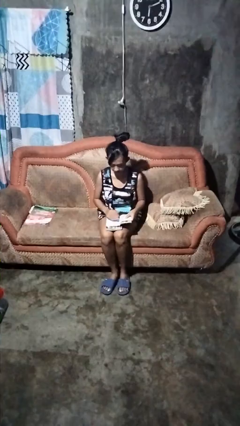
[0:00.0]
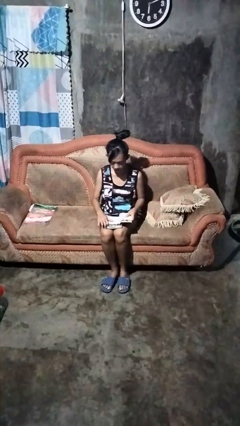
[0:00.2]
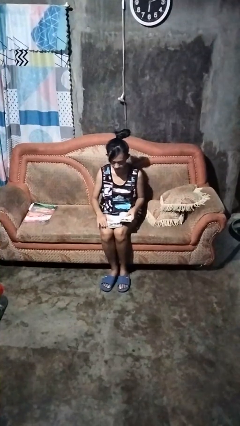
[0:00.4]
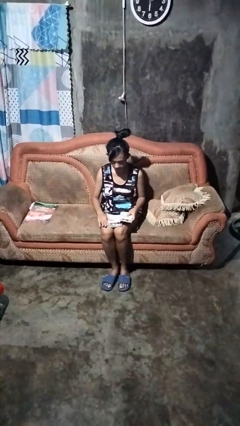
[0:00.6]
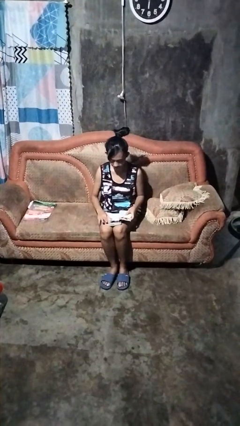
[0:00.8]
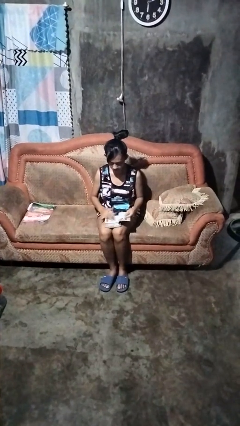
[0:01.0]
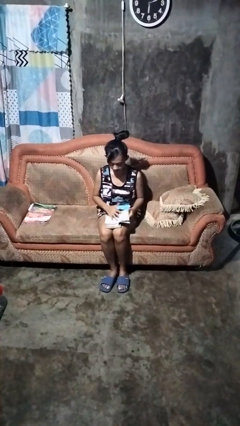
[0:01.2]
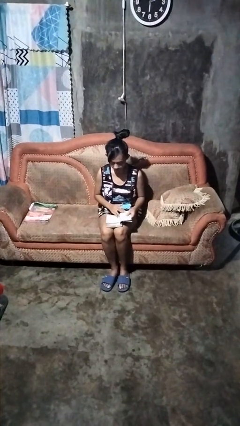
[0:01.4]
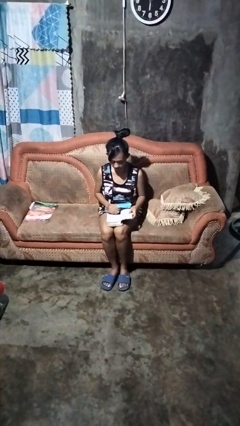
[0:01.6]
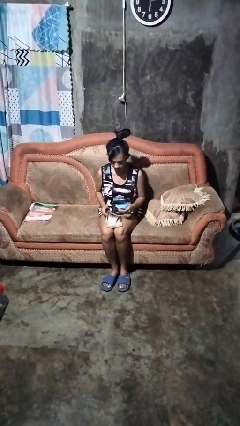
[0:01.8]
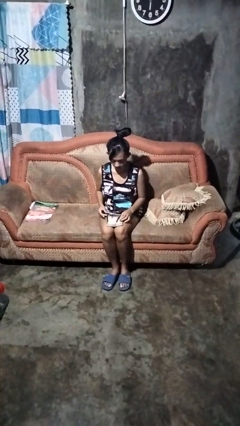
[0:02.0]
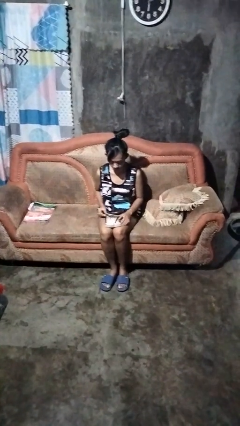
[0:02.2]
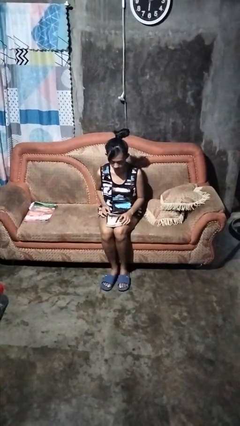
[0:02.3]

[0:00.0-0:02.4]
person reads book

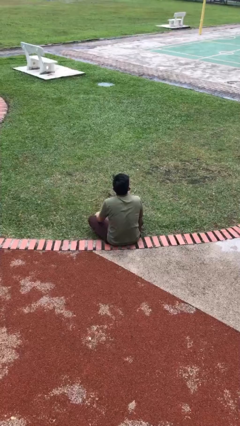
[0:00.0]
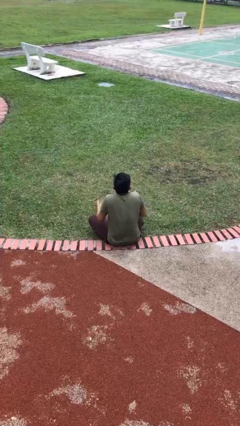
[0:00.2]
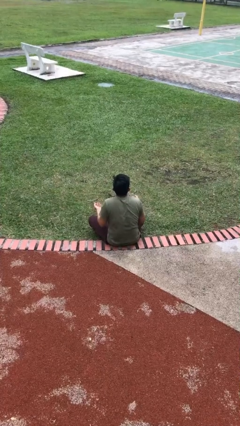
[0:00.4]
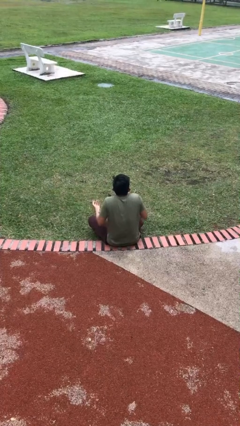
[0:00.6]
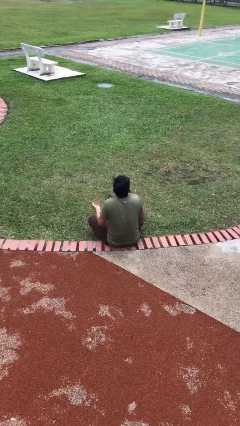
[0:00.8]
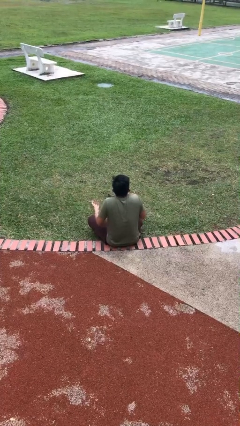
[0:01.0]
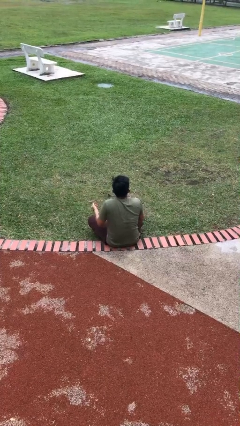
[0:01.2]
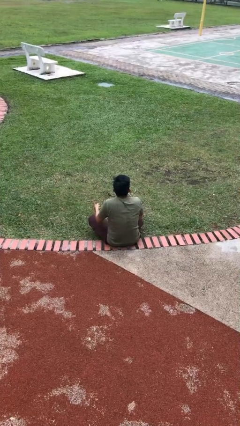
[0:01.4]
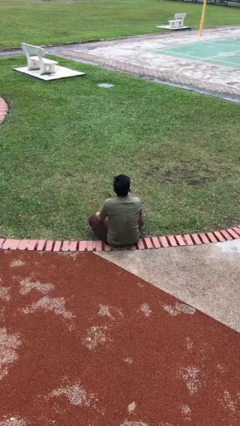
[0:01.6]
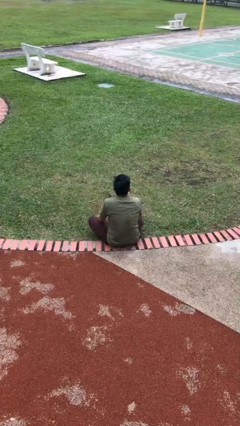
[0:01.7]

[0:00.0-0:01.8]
person shrugs

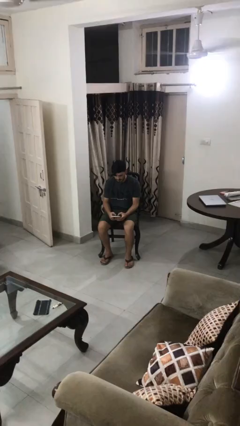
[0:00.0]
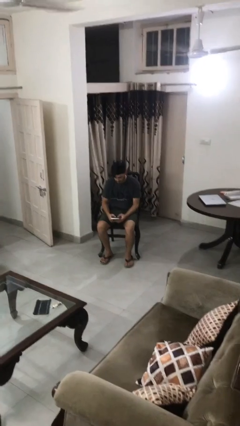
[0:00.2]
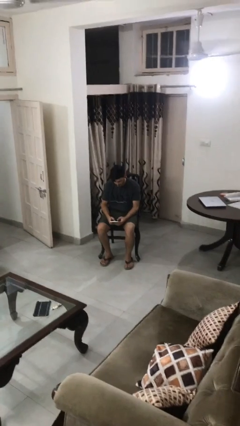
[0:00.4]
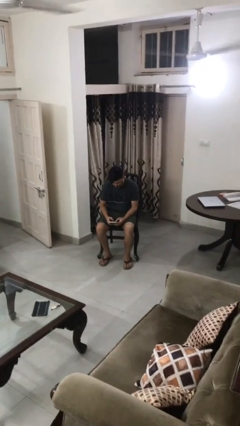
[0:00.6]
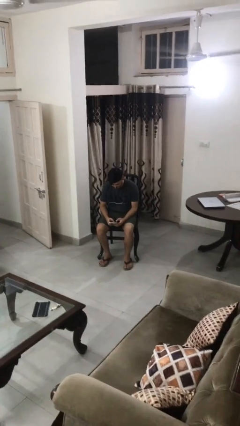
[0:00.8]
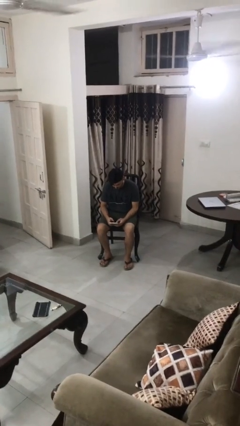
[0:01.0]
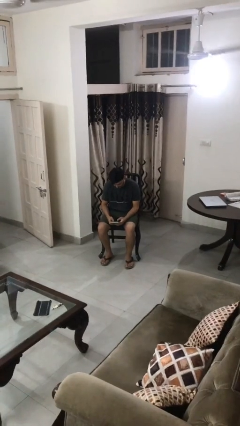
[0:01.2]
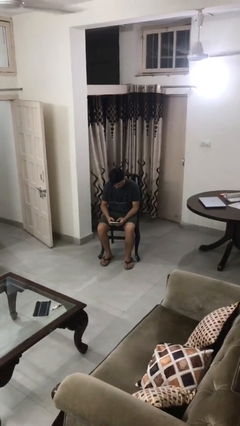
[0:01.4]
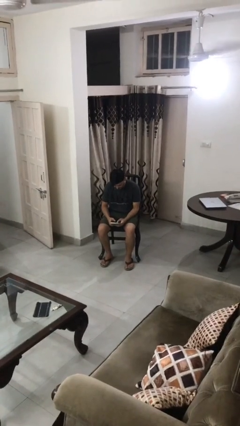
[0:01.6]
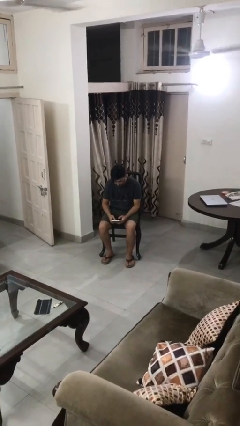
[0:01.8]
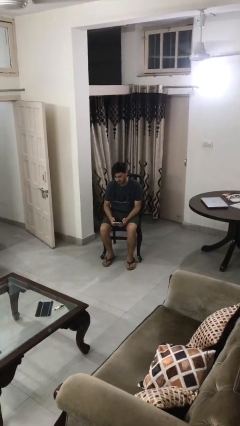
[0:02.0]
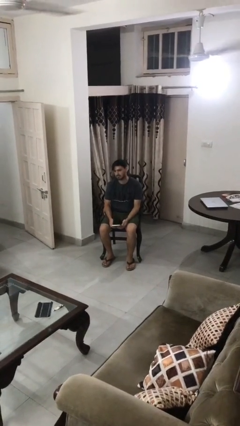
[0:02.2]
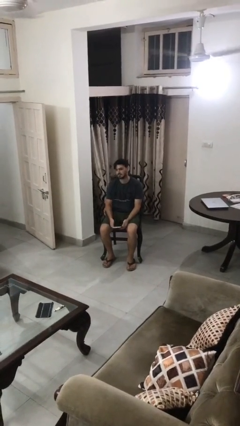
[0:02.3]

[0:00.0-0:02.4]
person interacts with tablet

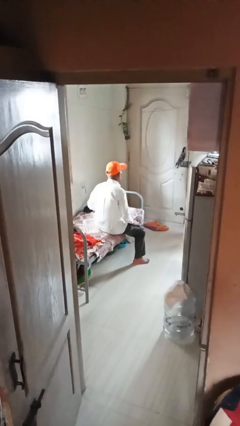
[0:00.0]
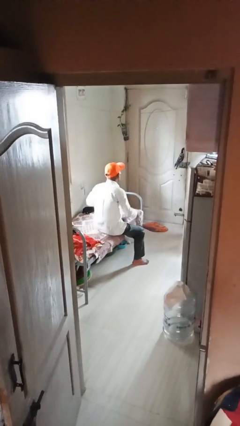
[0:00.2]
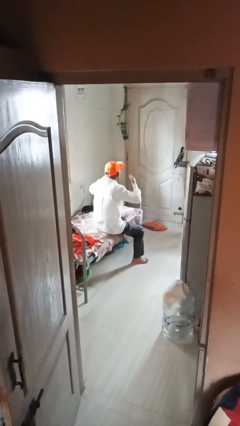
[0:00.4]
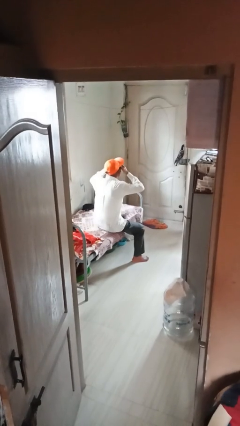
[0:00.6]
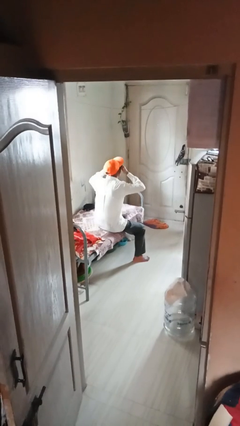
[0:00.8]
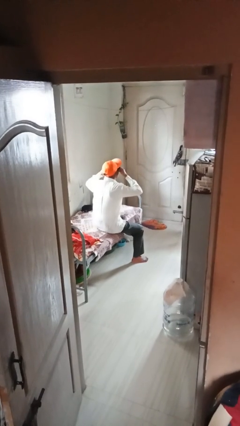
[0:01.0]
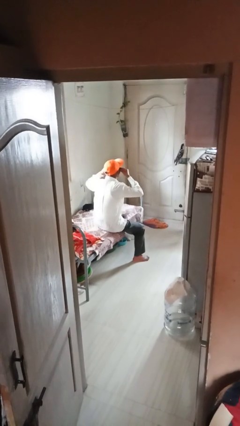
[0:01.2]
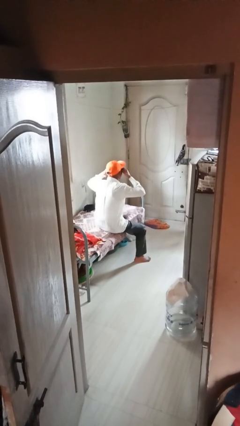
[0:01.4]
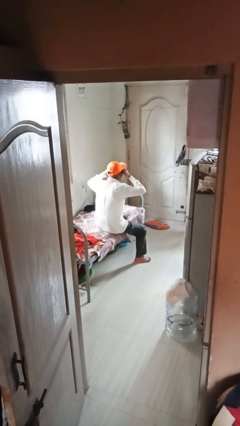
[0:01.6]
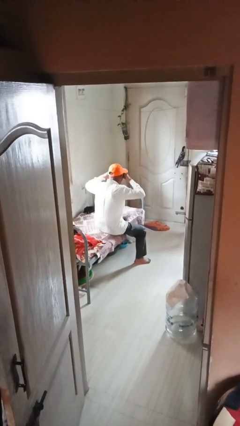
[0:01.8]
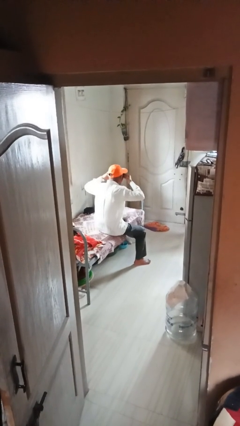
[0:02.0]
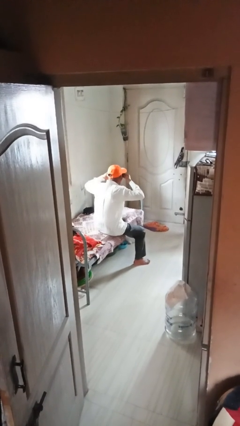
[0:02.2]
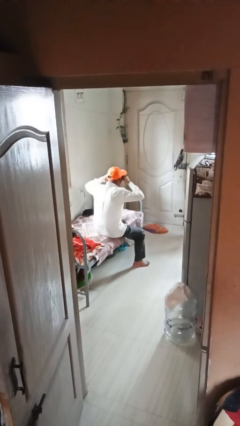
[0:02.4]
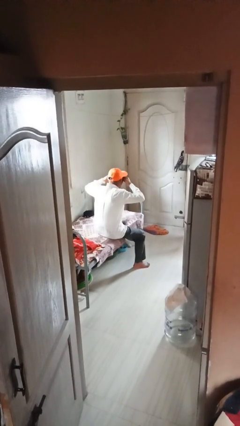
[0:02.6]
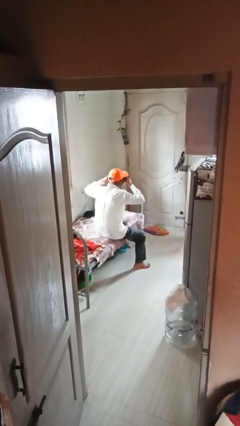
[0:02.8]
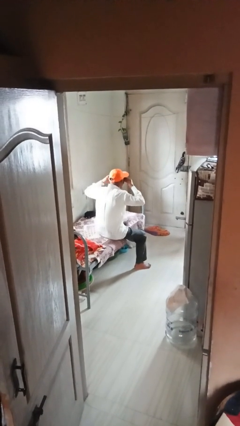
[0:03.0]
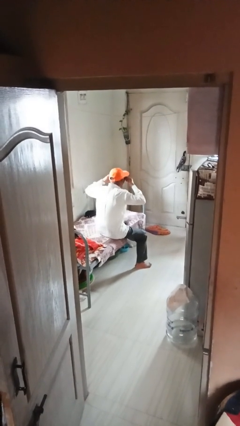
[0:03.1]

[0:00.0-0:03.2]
person rubs eyes

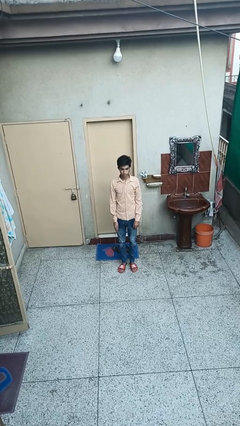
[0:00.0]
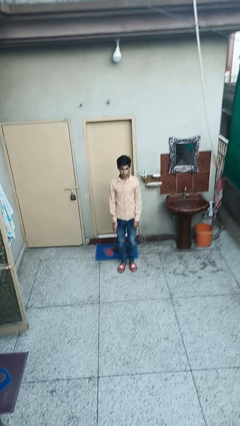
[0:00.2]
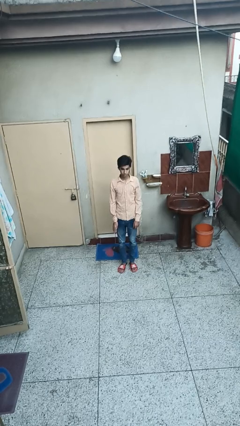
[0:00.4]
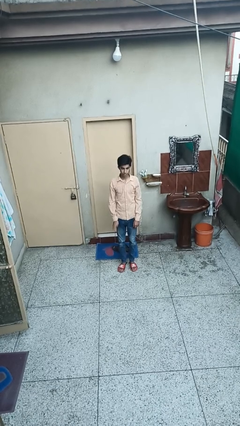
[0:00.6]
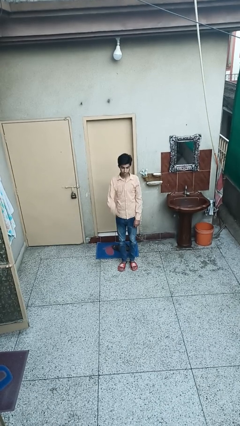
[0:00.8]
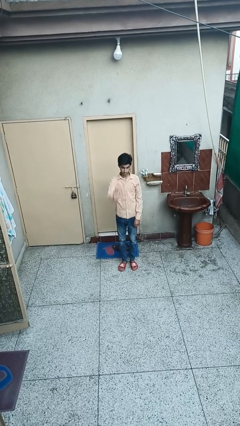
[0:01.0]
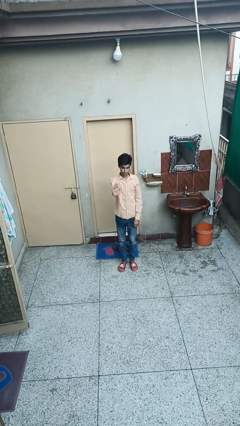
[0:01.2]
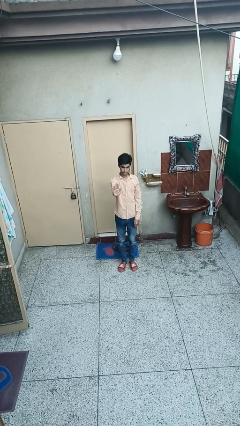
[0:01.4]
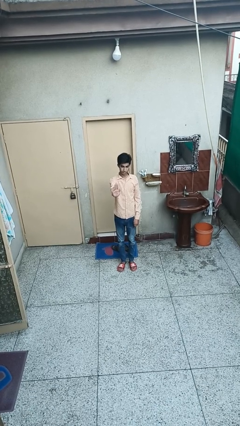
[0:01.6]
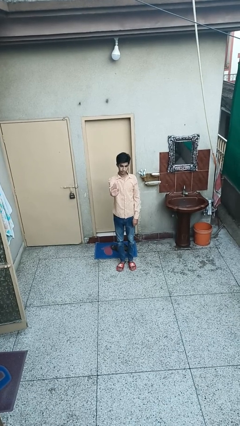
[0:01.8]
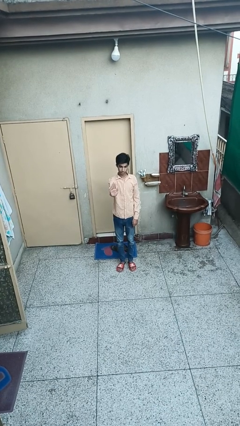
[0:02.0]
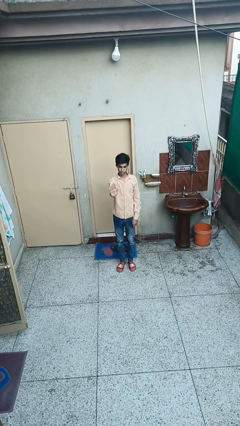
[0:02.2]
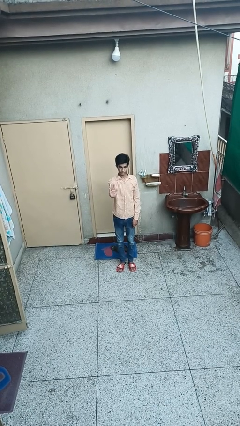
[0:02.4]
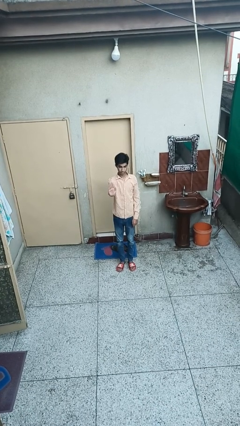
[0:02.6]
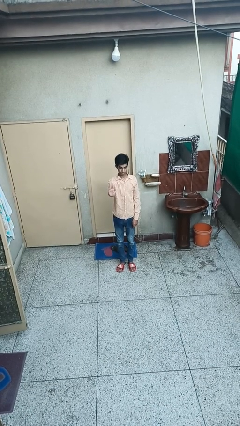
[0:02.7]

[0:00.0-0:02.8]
person gestures stop

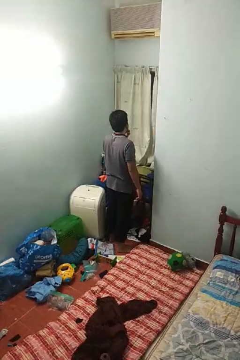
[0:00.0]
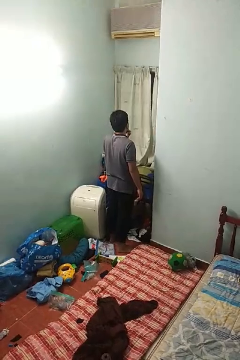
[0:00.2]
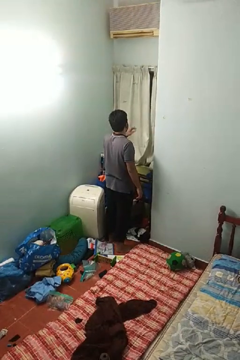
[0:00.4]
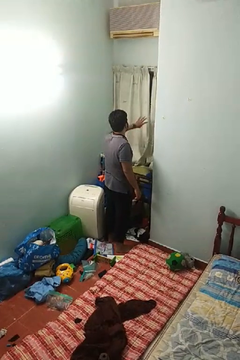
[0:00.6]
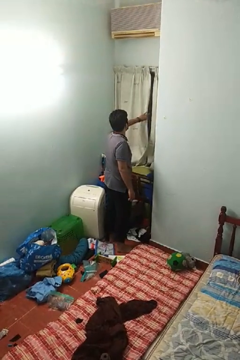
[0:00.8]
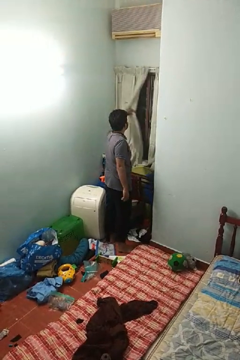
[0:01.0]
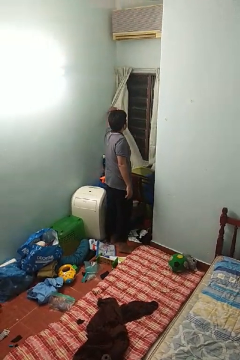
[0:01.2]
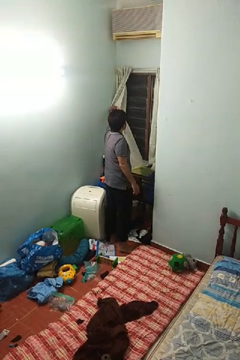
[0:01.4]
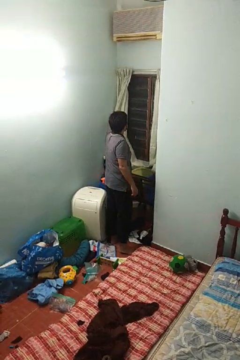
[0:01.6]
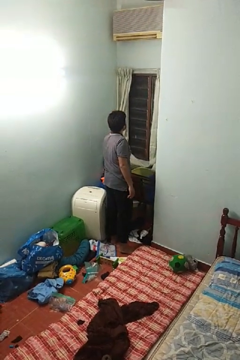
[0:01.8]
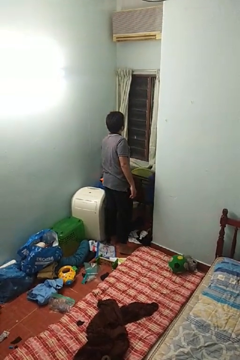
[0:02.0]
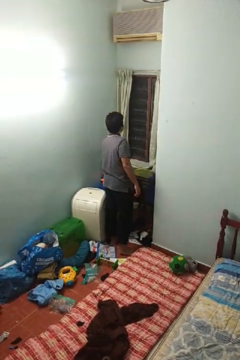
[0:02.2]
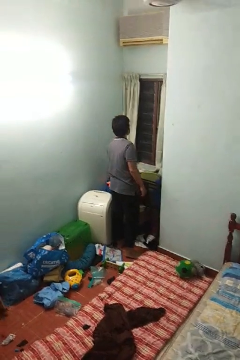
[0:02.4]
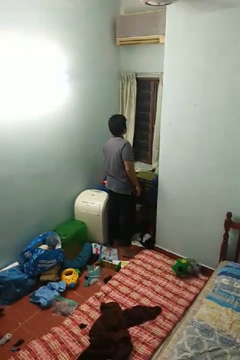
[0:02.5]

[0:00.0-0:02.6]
person opens curtains

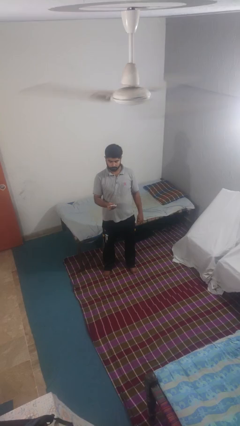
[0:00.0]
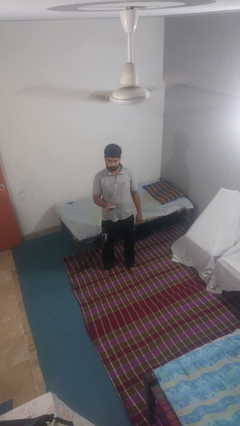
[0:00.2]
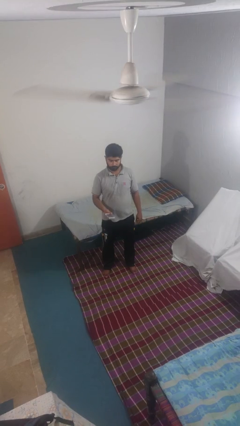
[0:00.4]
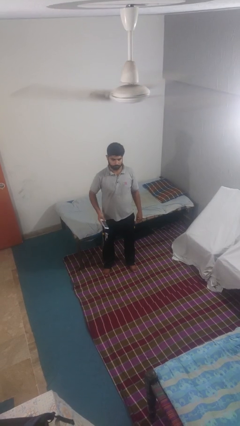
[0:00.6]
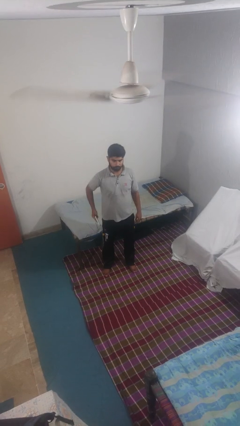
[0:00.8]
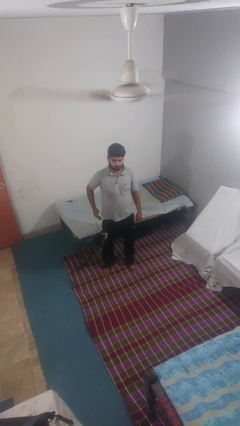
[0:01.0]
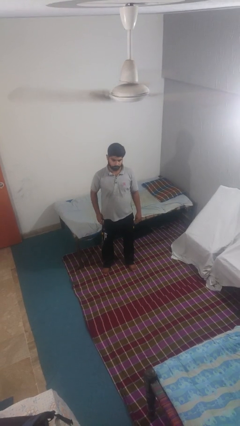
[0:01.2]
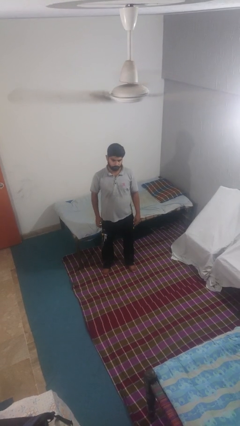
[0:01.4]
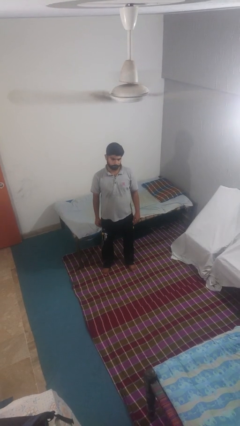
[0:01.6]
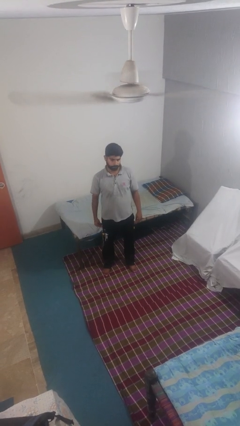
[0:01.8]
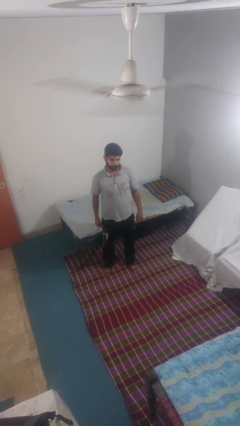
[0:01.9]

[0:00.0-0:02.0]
person puts phone into pocket

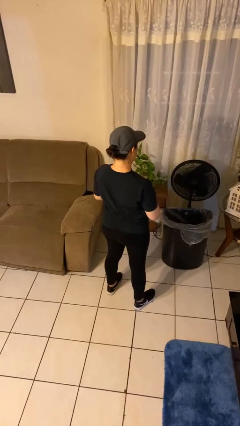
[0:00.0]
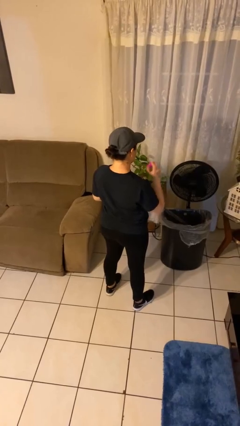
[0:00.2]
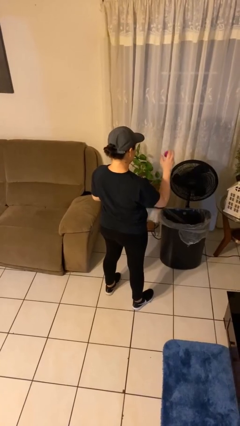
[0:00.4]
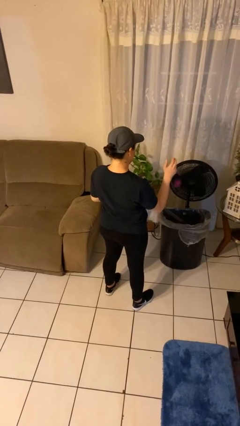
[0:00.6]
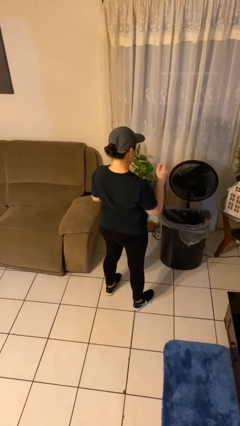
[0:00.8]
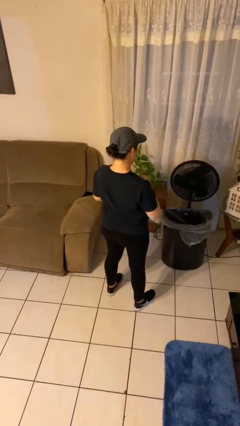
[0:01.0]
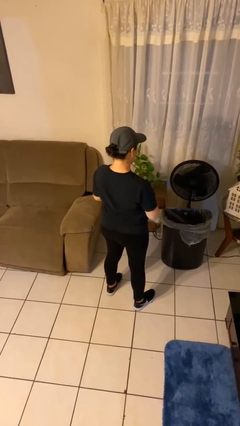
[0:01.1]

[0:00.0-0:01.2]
person discards trash
